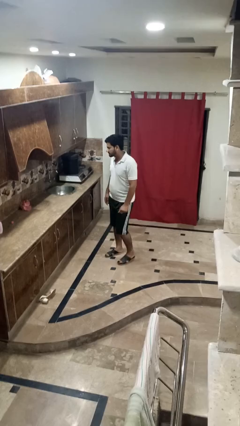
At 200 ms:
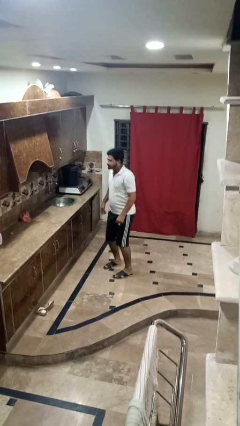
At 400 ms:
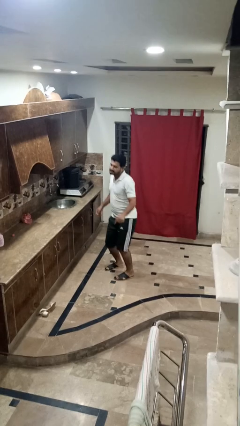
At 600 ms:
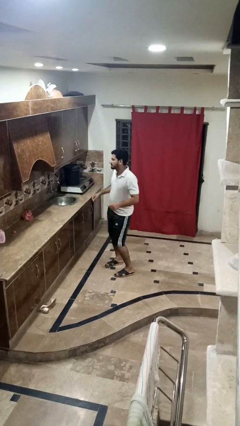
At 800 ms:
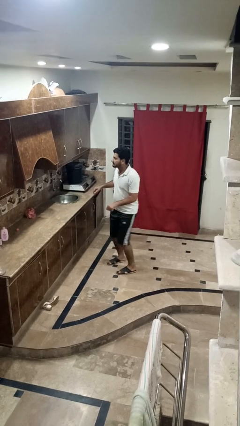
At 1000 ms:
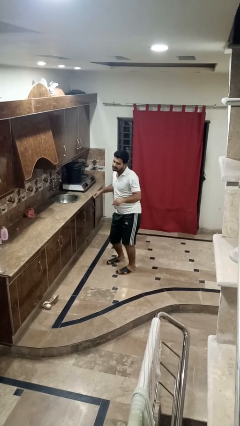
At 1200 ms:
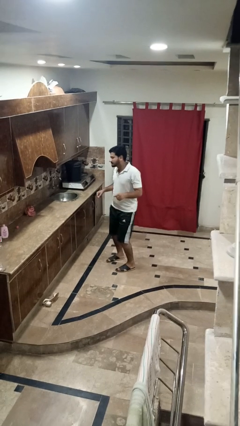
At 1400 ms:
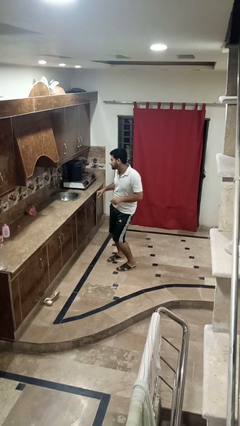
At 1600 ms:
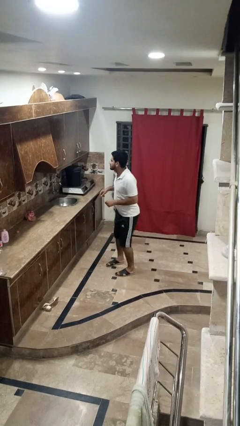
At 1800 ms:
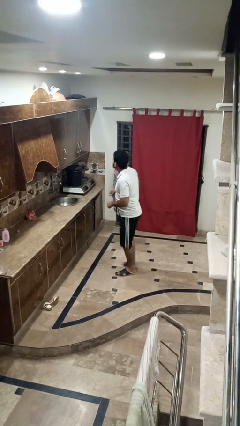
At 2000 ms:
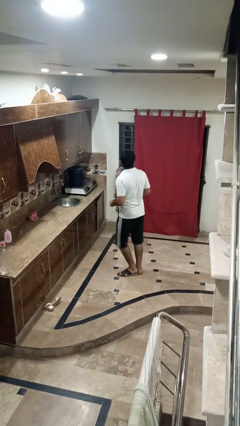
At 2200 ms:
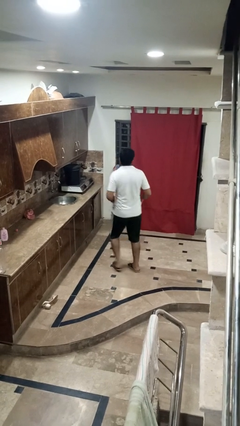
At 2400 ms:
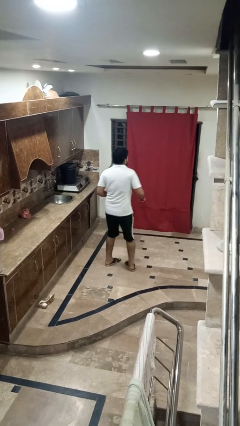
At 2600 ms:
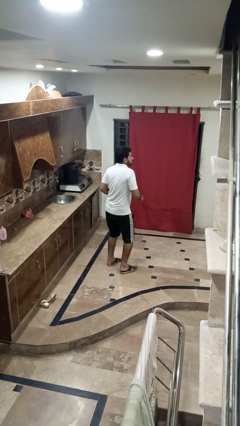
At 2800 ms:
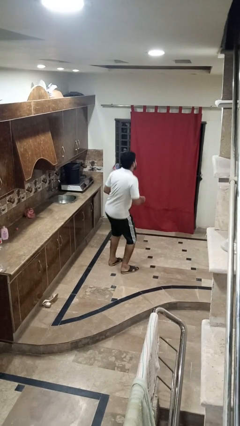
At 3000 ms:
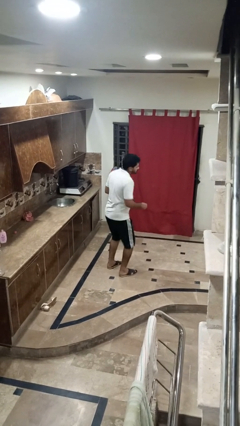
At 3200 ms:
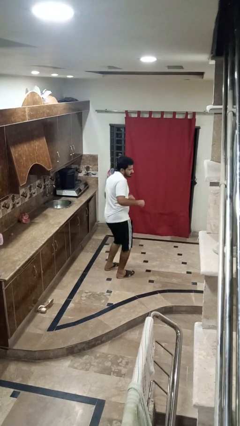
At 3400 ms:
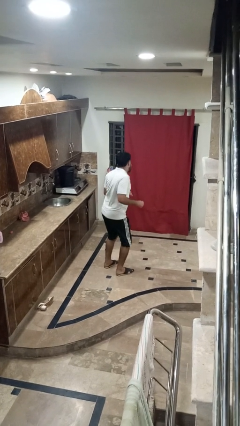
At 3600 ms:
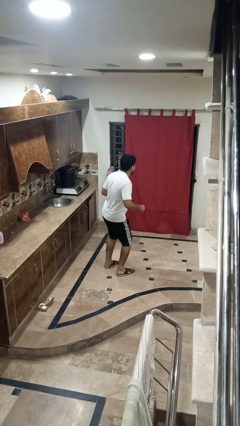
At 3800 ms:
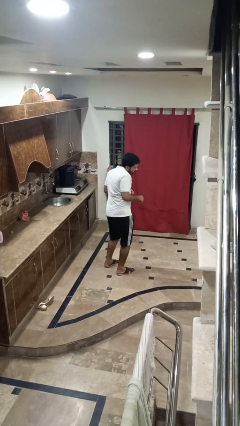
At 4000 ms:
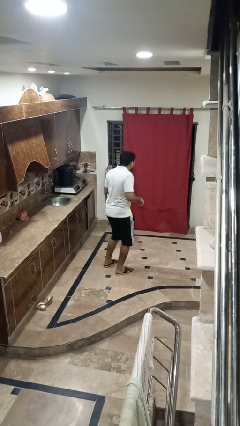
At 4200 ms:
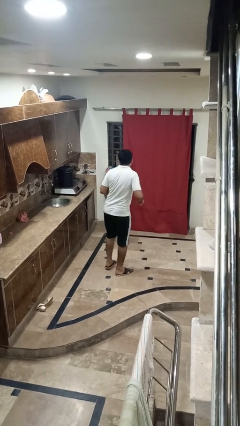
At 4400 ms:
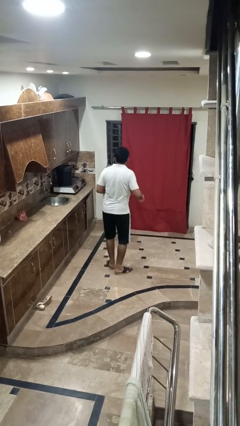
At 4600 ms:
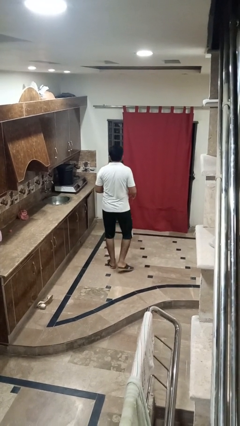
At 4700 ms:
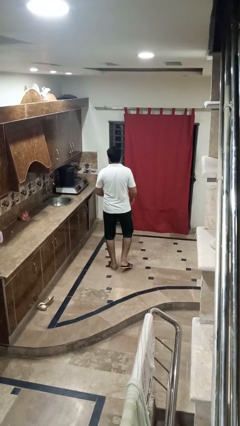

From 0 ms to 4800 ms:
person wiggles hips

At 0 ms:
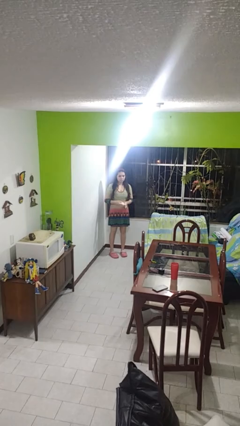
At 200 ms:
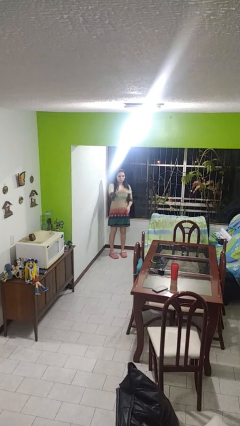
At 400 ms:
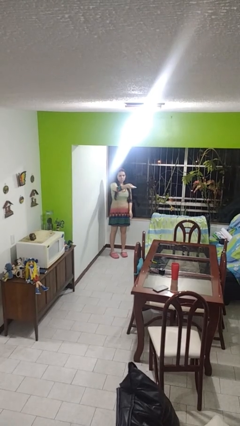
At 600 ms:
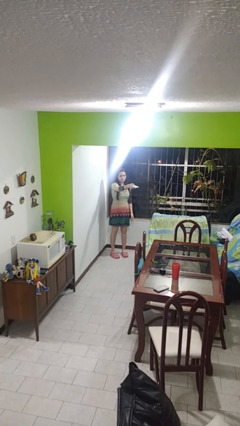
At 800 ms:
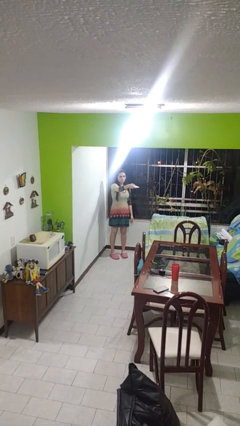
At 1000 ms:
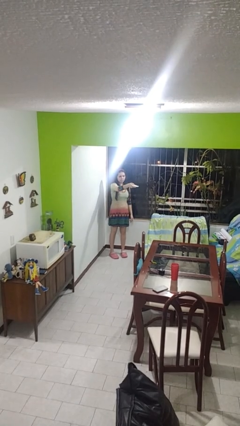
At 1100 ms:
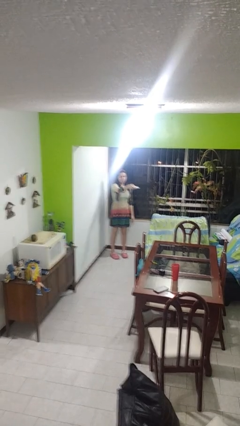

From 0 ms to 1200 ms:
person uses television remote

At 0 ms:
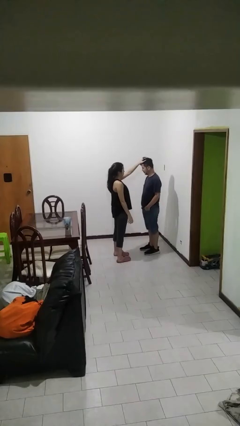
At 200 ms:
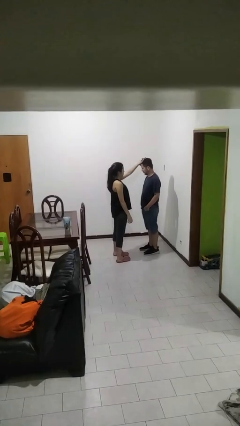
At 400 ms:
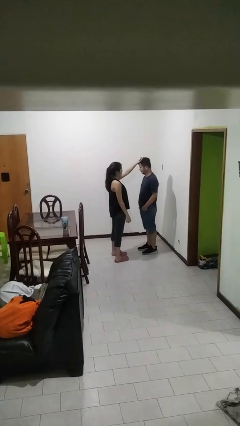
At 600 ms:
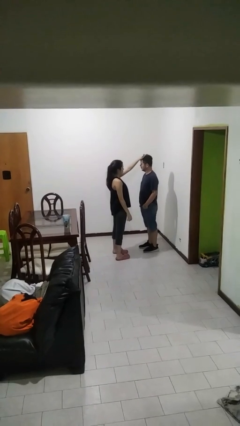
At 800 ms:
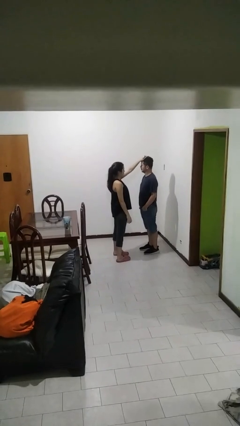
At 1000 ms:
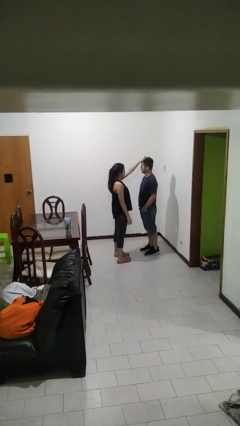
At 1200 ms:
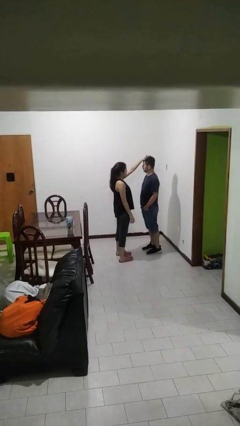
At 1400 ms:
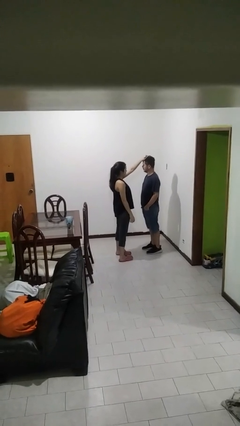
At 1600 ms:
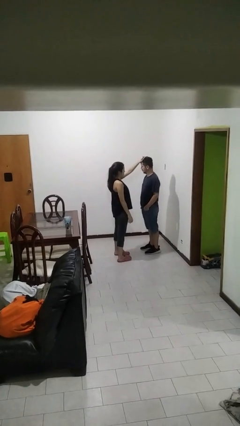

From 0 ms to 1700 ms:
person grabs person by hair

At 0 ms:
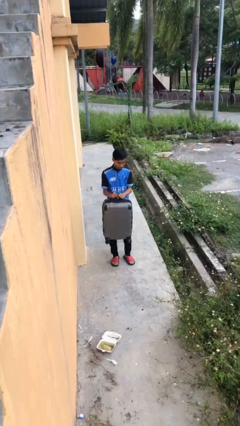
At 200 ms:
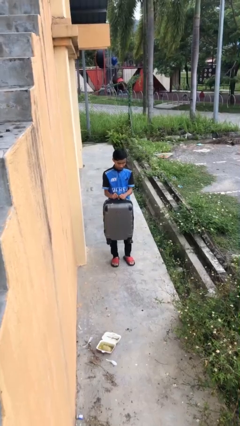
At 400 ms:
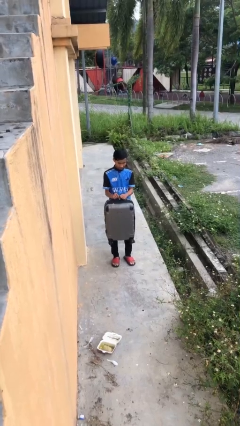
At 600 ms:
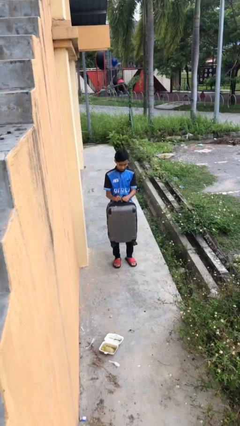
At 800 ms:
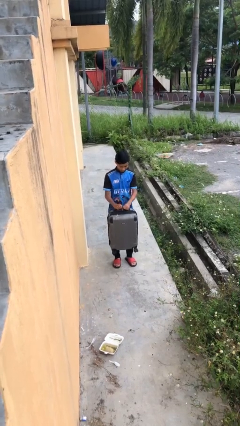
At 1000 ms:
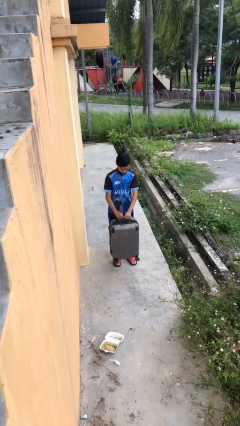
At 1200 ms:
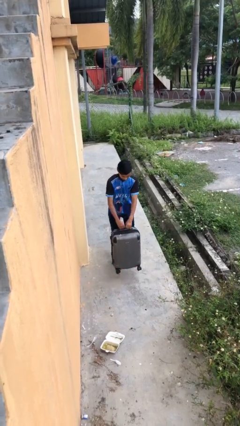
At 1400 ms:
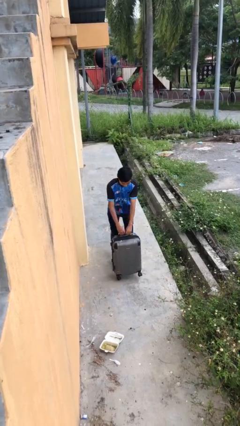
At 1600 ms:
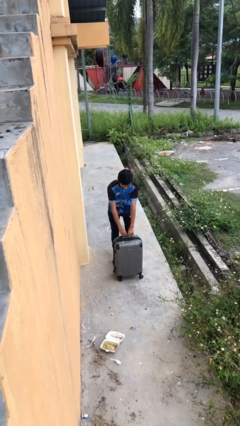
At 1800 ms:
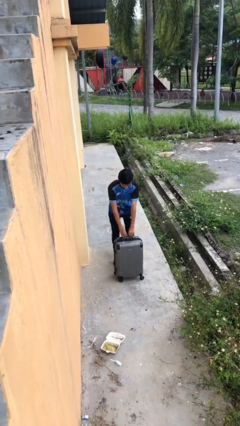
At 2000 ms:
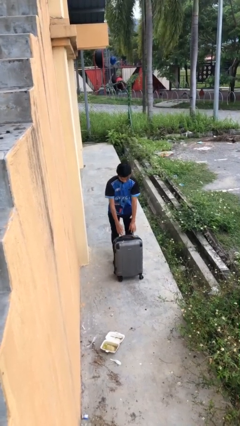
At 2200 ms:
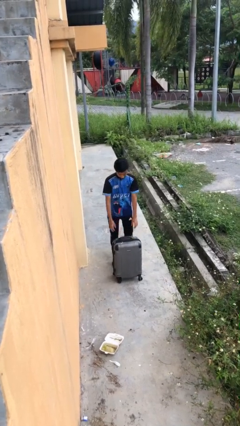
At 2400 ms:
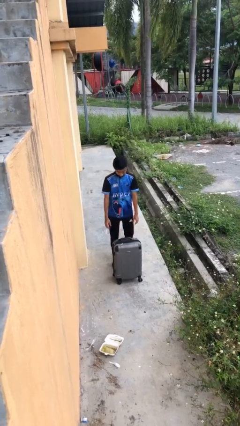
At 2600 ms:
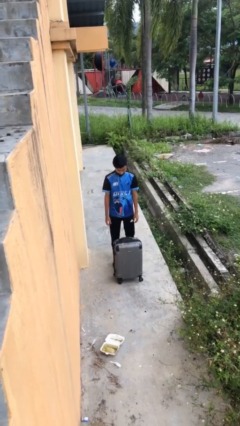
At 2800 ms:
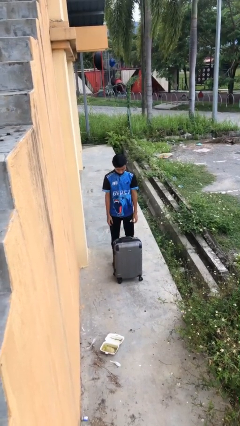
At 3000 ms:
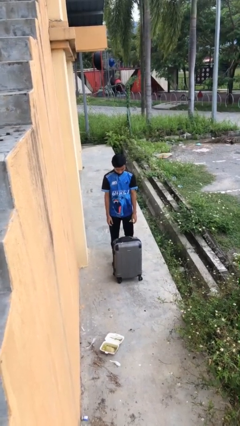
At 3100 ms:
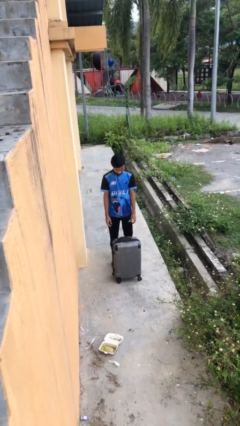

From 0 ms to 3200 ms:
person puts down object on floor

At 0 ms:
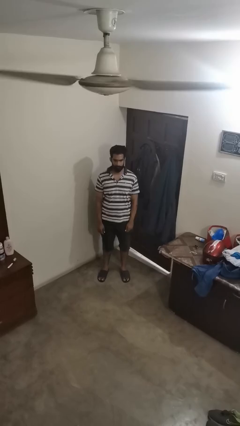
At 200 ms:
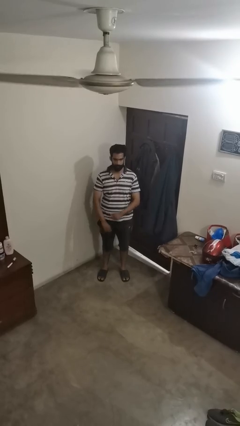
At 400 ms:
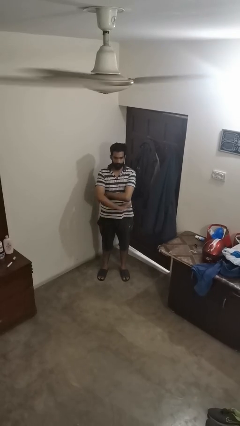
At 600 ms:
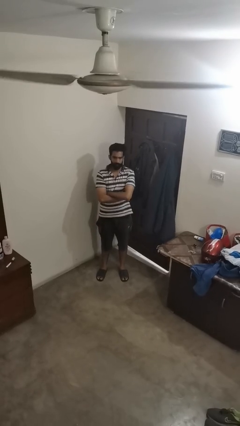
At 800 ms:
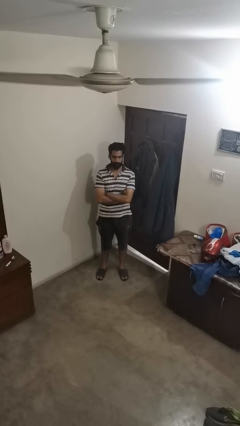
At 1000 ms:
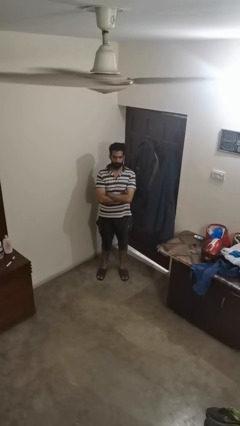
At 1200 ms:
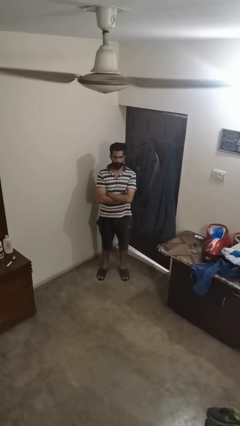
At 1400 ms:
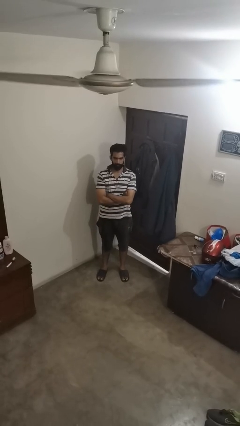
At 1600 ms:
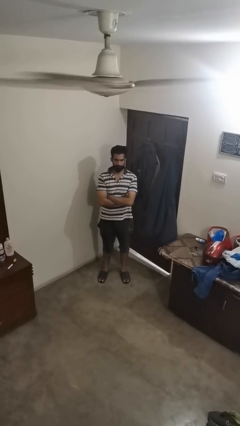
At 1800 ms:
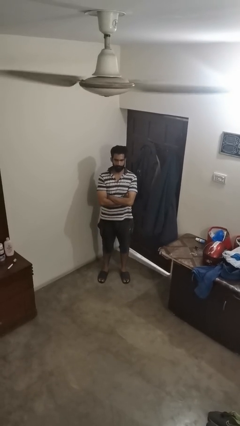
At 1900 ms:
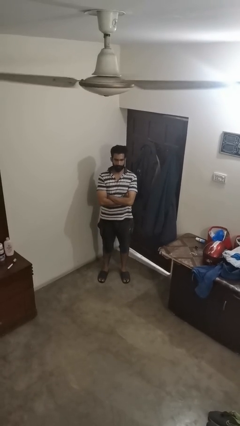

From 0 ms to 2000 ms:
person crosses arms

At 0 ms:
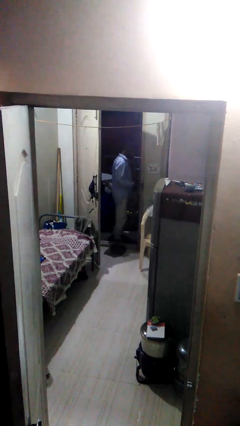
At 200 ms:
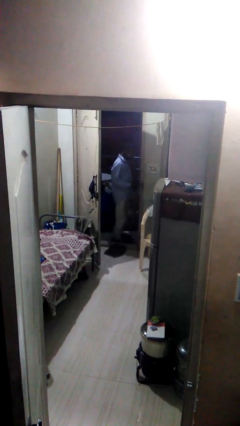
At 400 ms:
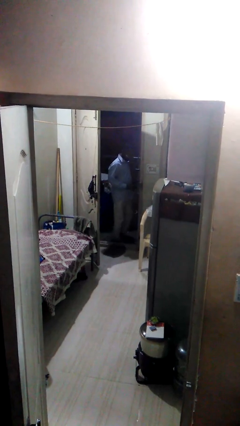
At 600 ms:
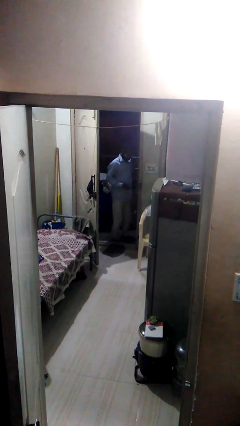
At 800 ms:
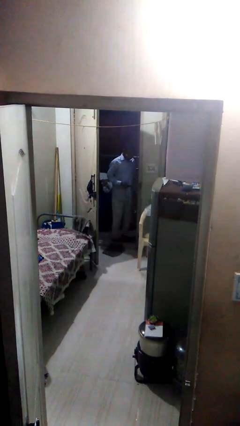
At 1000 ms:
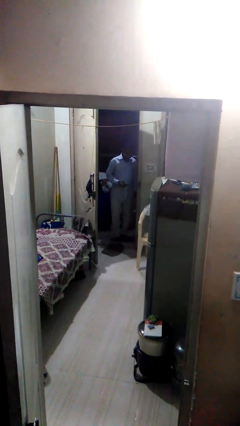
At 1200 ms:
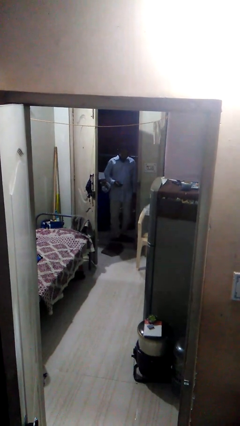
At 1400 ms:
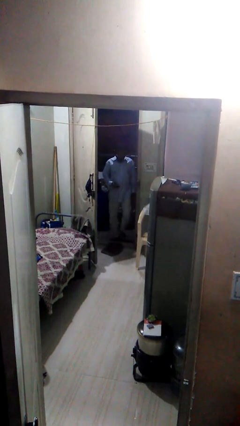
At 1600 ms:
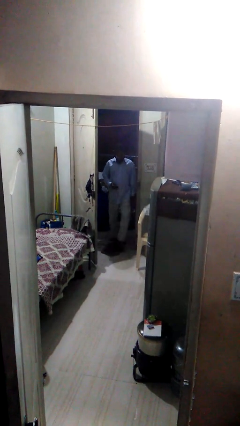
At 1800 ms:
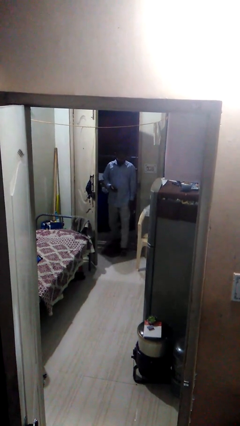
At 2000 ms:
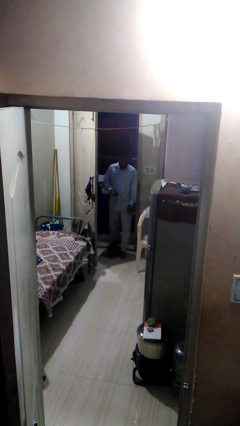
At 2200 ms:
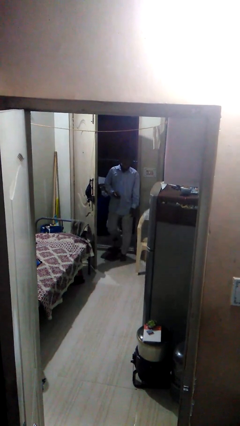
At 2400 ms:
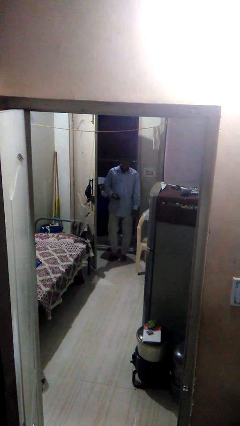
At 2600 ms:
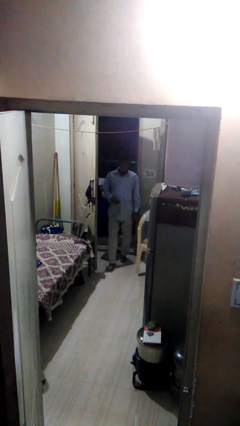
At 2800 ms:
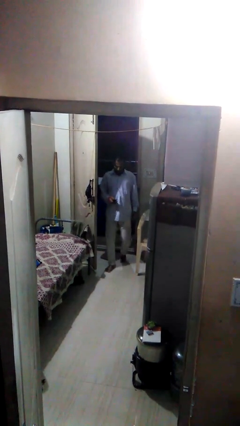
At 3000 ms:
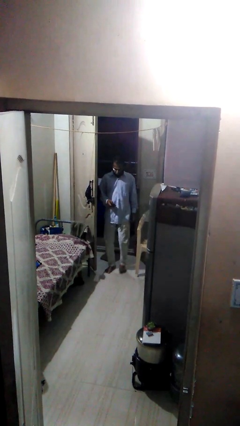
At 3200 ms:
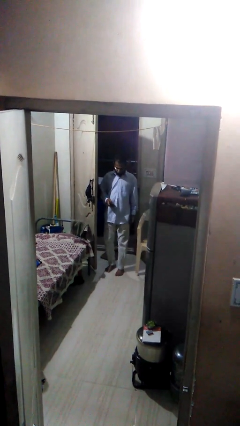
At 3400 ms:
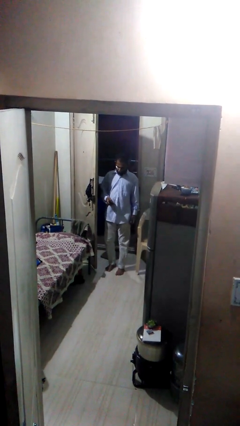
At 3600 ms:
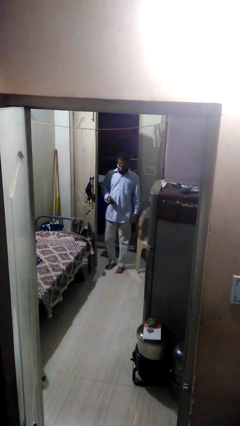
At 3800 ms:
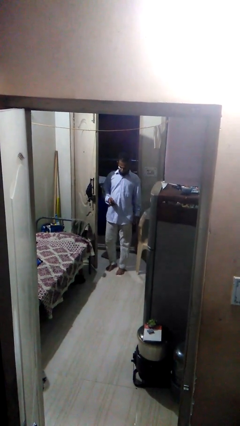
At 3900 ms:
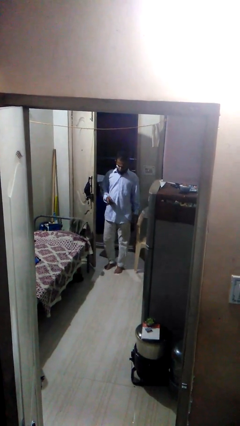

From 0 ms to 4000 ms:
person enters scene through structure

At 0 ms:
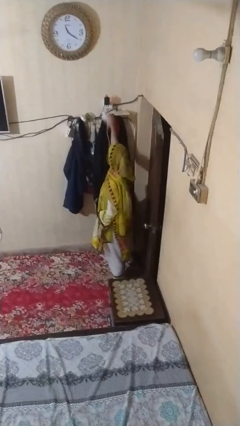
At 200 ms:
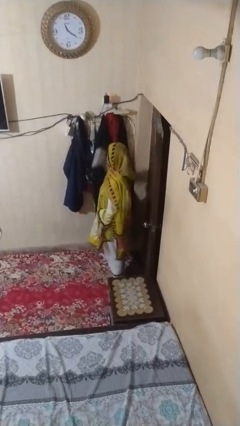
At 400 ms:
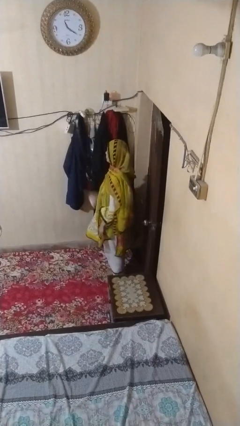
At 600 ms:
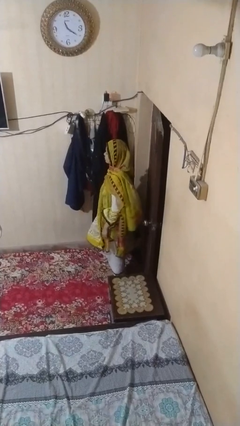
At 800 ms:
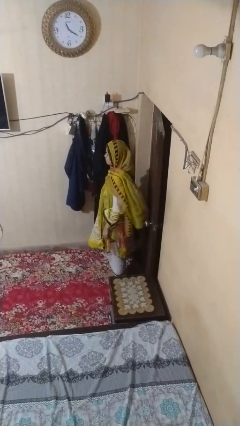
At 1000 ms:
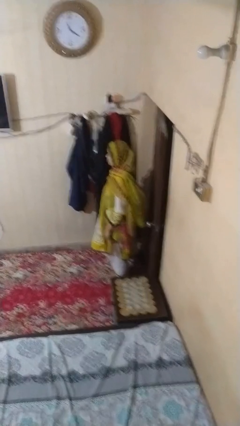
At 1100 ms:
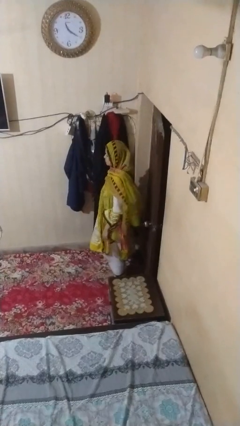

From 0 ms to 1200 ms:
person unplugs from electrical socket
